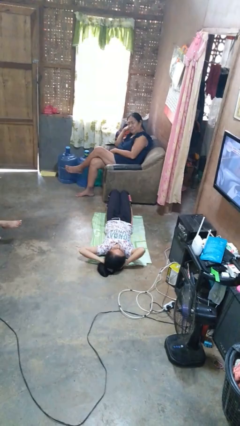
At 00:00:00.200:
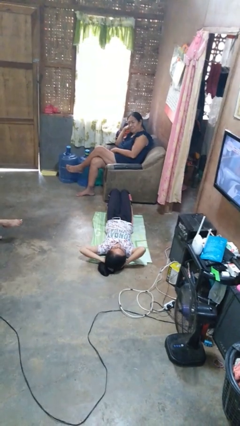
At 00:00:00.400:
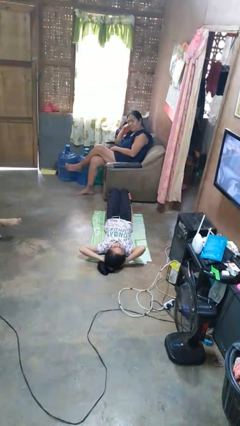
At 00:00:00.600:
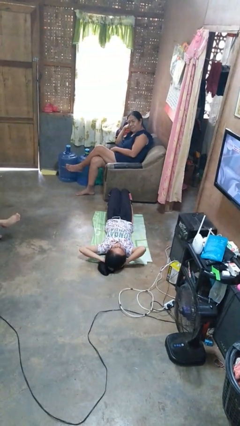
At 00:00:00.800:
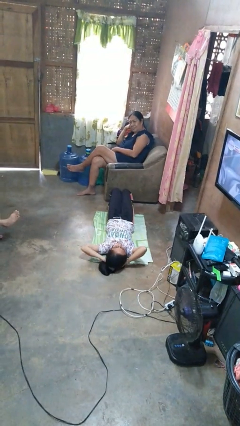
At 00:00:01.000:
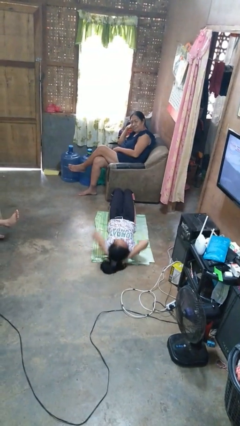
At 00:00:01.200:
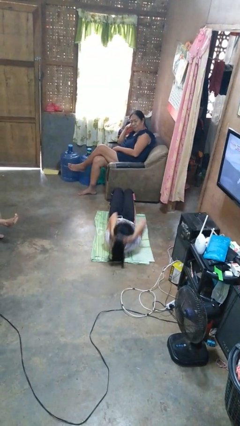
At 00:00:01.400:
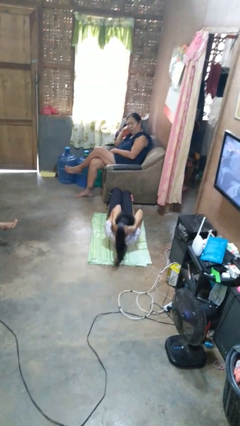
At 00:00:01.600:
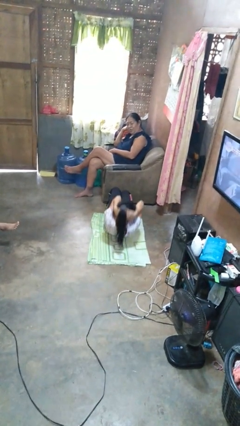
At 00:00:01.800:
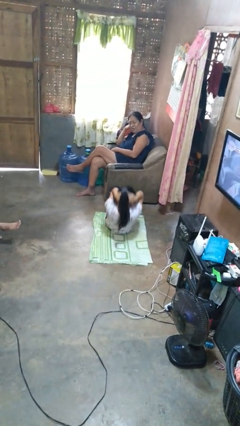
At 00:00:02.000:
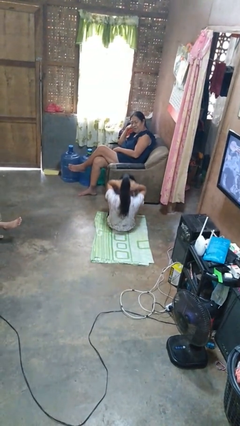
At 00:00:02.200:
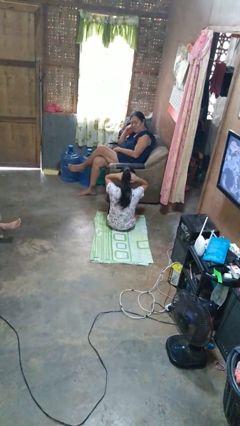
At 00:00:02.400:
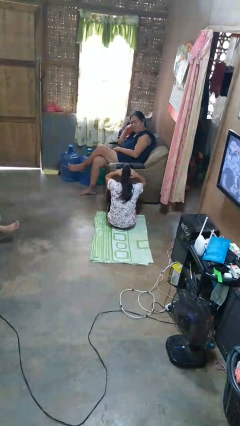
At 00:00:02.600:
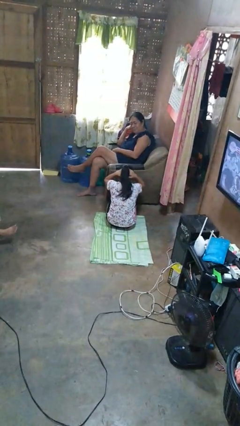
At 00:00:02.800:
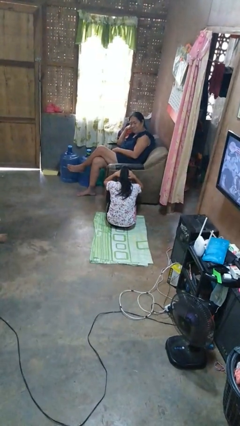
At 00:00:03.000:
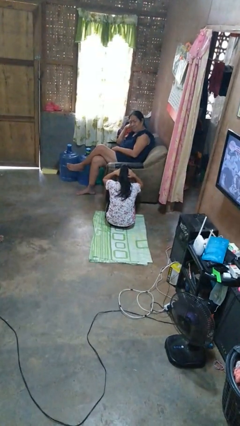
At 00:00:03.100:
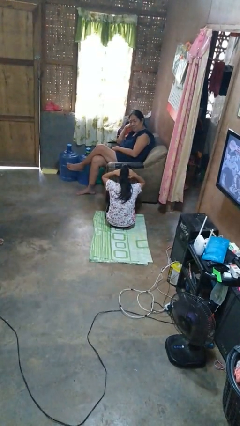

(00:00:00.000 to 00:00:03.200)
person exercises with situp

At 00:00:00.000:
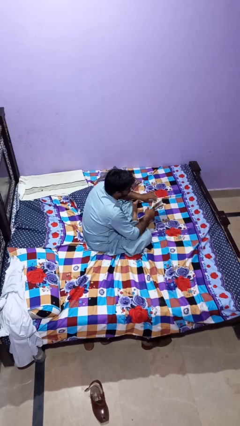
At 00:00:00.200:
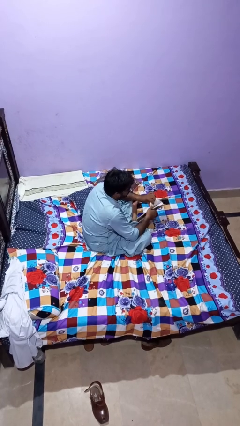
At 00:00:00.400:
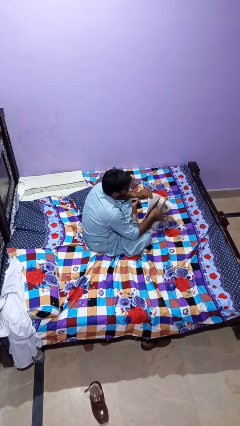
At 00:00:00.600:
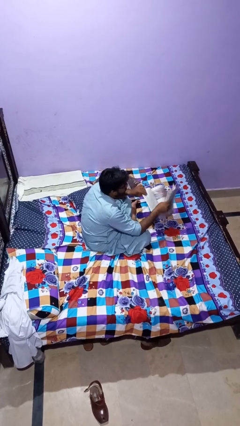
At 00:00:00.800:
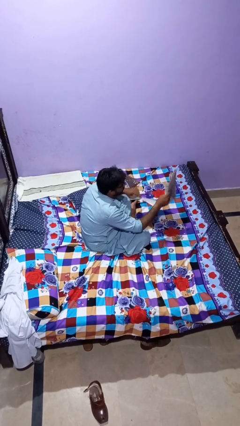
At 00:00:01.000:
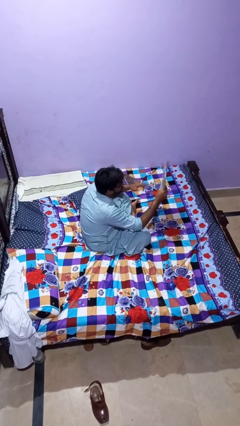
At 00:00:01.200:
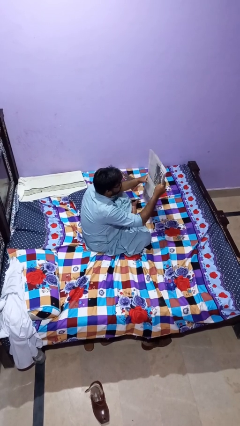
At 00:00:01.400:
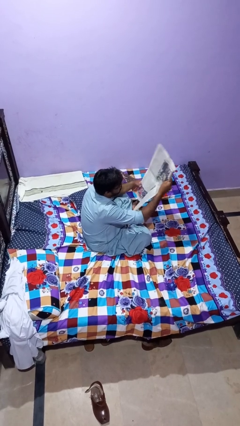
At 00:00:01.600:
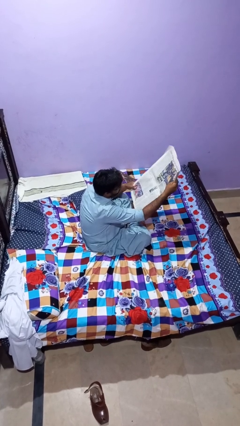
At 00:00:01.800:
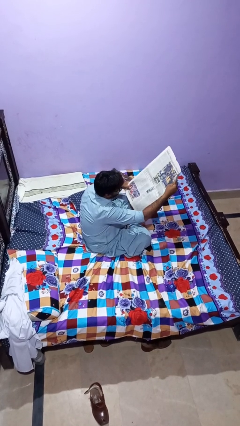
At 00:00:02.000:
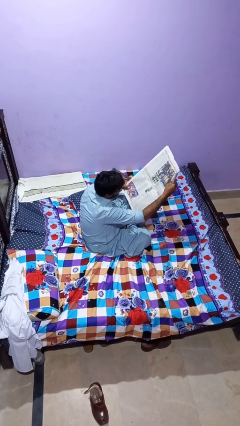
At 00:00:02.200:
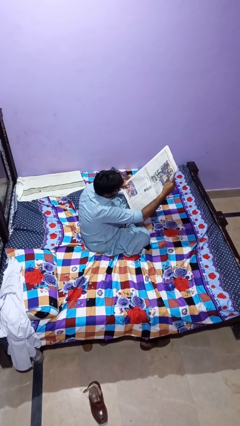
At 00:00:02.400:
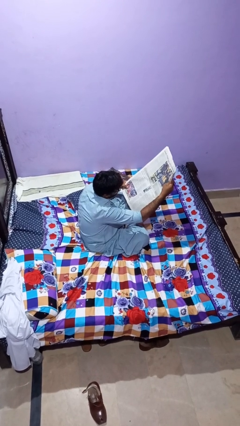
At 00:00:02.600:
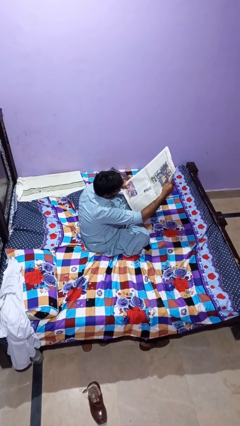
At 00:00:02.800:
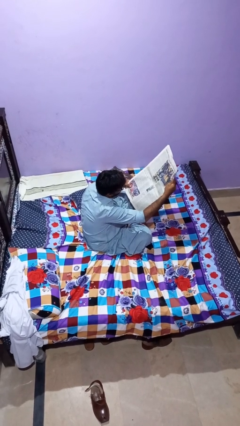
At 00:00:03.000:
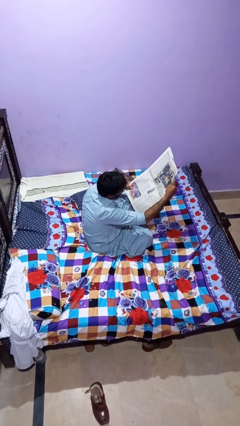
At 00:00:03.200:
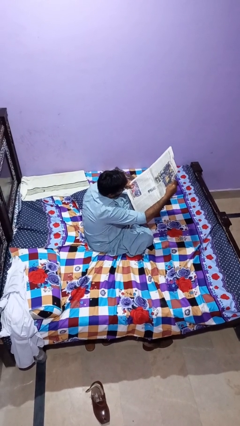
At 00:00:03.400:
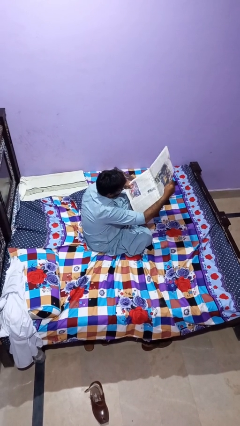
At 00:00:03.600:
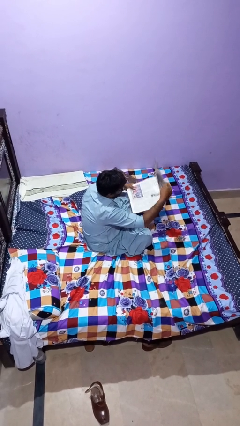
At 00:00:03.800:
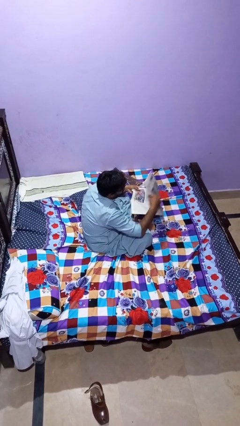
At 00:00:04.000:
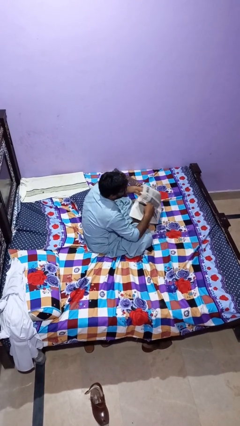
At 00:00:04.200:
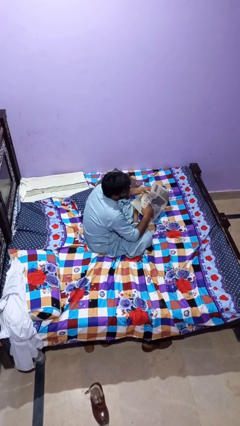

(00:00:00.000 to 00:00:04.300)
person reads newspaper

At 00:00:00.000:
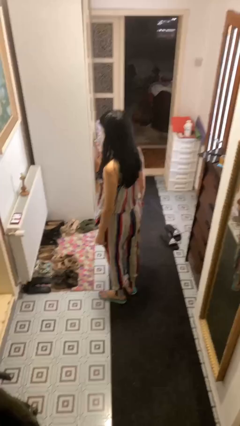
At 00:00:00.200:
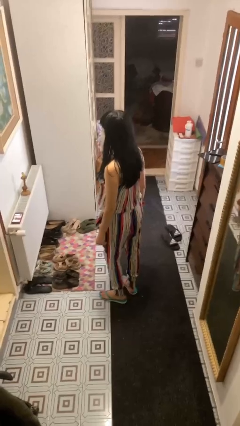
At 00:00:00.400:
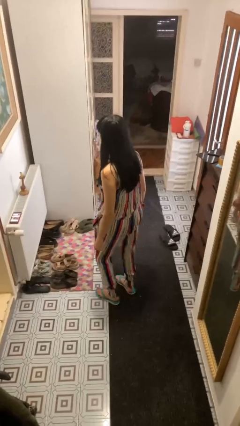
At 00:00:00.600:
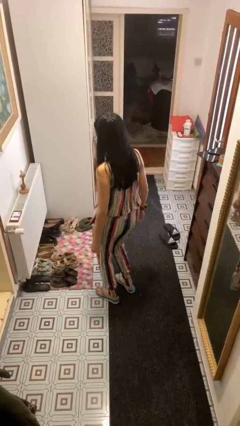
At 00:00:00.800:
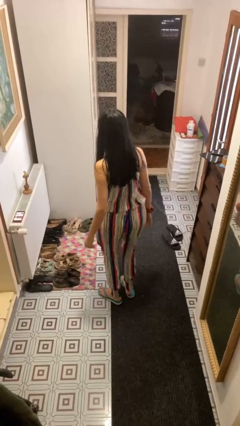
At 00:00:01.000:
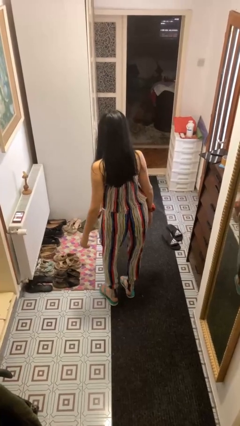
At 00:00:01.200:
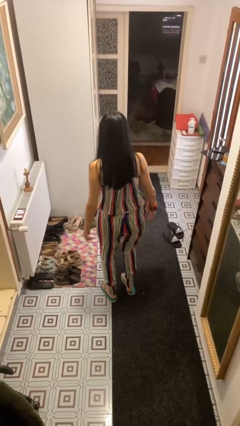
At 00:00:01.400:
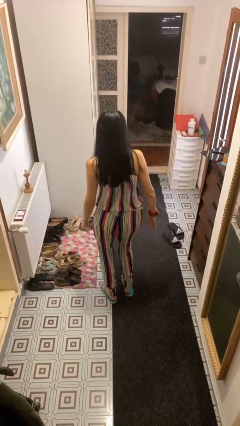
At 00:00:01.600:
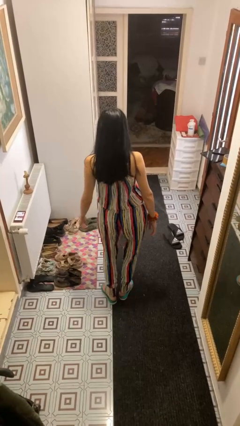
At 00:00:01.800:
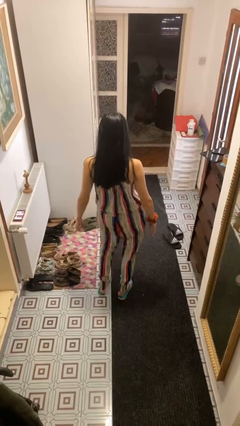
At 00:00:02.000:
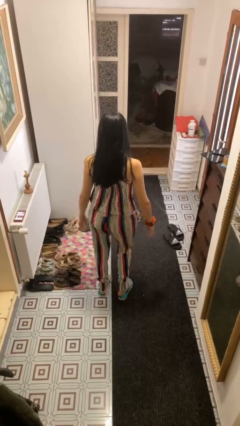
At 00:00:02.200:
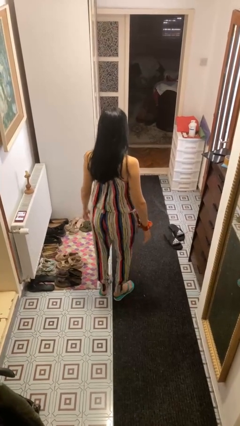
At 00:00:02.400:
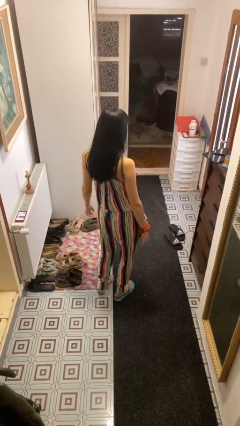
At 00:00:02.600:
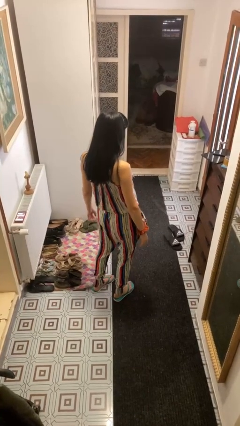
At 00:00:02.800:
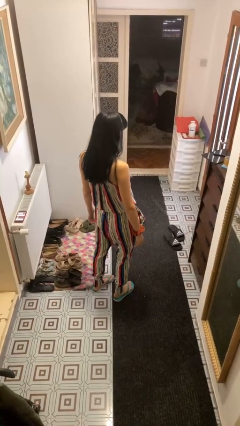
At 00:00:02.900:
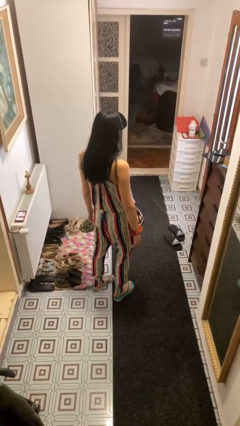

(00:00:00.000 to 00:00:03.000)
person wiggles hips

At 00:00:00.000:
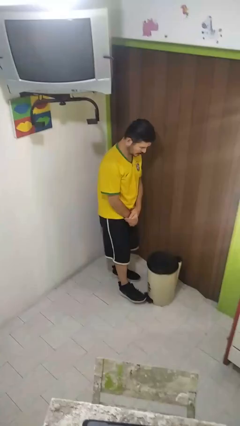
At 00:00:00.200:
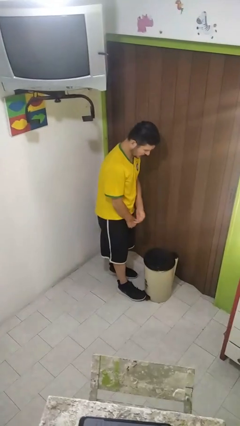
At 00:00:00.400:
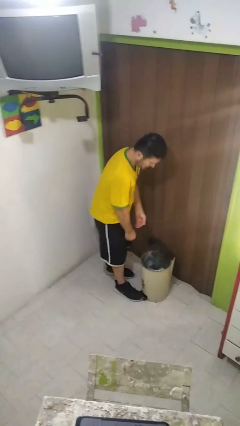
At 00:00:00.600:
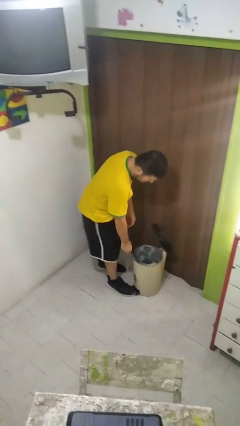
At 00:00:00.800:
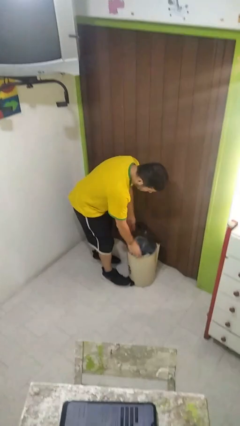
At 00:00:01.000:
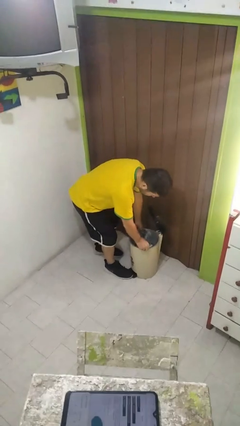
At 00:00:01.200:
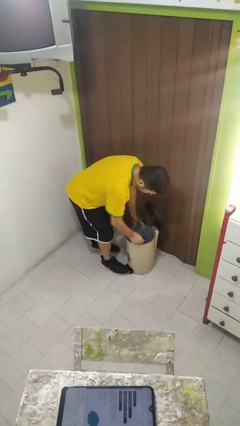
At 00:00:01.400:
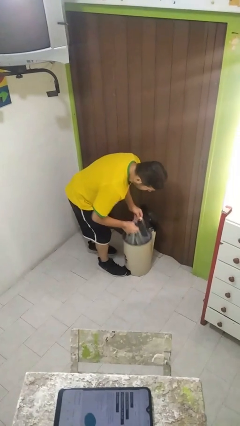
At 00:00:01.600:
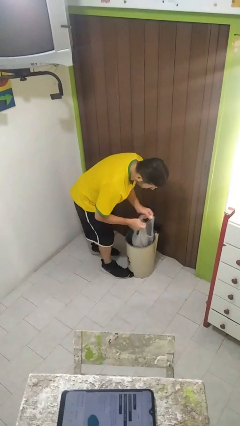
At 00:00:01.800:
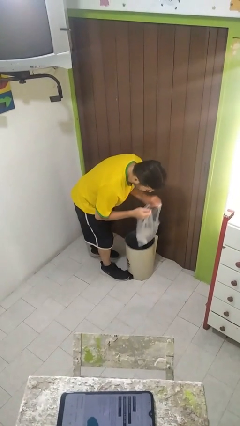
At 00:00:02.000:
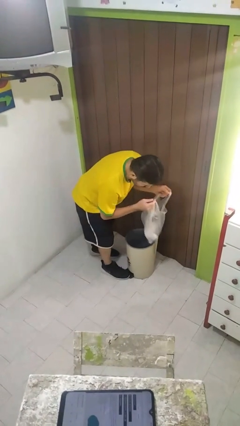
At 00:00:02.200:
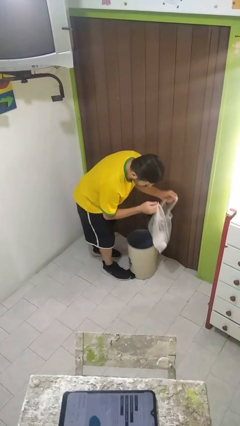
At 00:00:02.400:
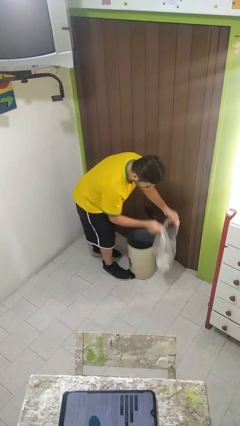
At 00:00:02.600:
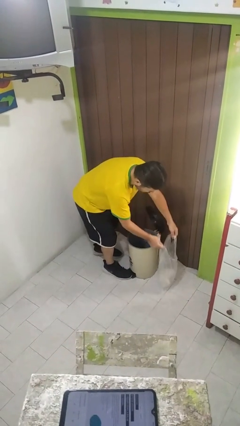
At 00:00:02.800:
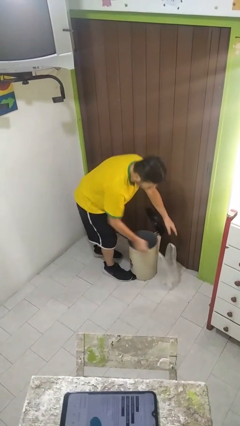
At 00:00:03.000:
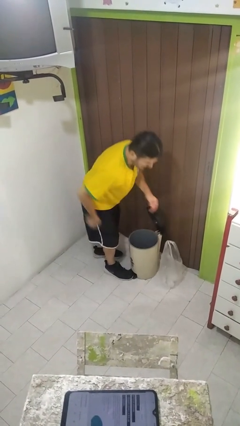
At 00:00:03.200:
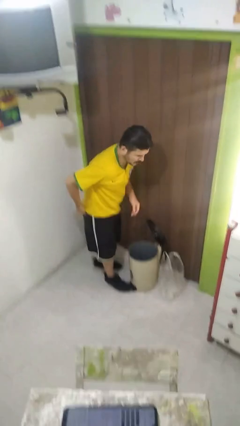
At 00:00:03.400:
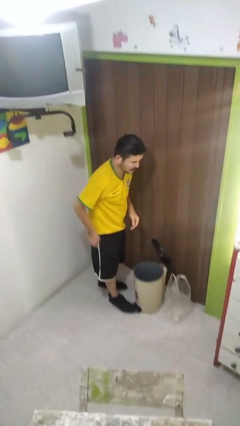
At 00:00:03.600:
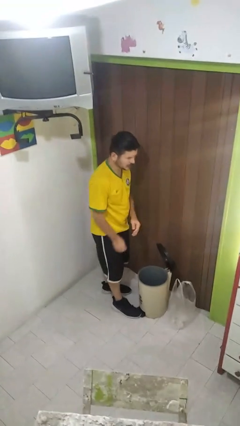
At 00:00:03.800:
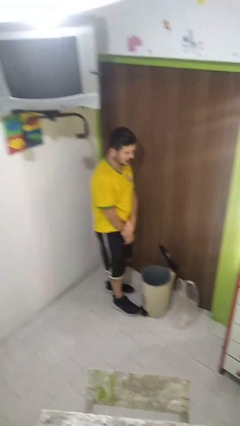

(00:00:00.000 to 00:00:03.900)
person removes trashbag from trashcan

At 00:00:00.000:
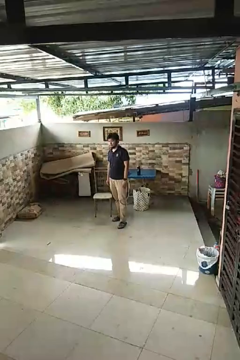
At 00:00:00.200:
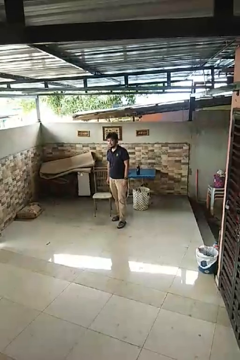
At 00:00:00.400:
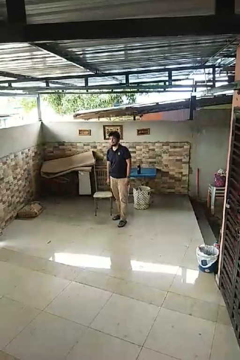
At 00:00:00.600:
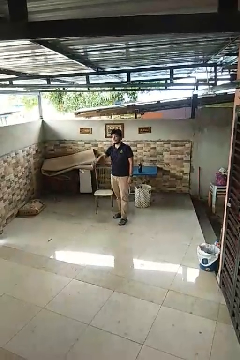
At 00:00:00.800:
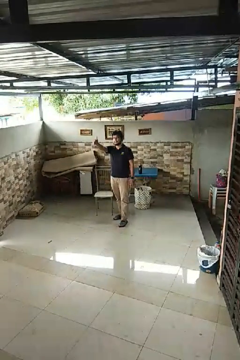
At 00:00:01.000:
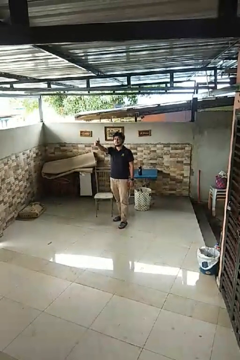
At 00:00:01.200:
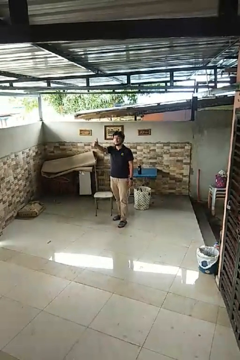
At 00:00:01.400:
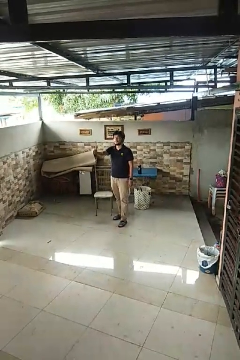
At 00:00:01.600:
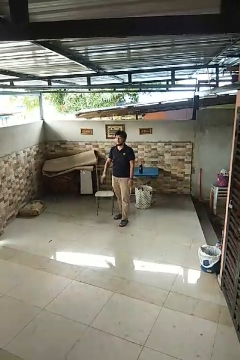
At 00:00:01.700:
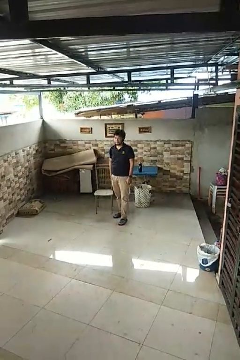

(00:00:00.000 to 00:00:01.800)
person gestures thumbs up

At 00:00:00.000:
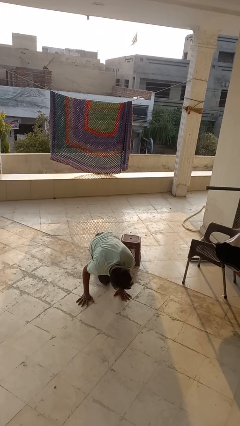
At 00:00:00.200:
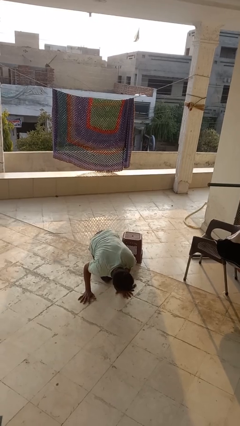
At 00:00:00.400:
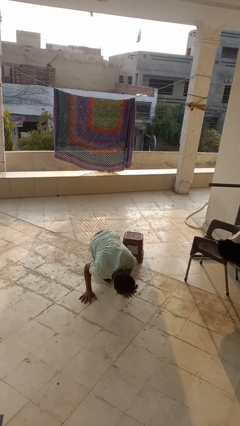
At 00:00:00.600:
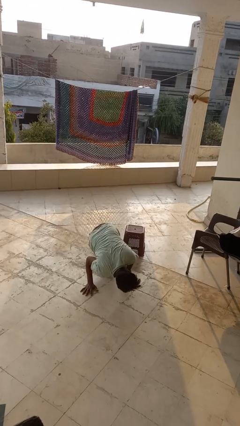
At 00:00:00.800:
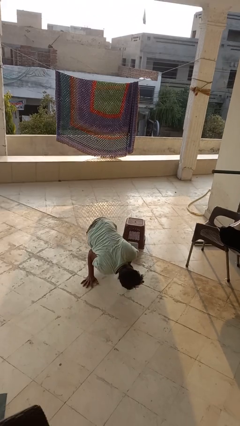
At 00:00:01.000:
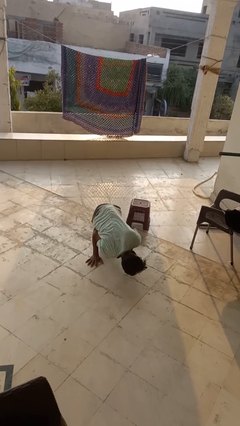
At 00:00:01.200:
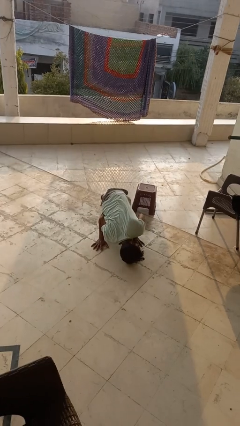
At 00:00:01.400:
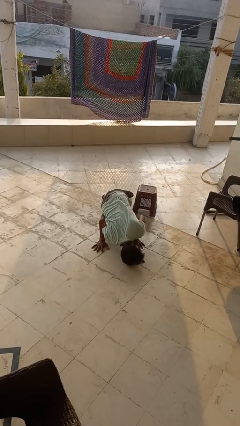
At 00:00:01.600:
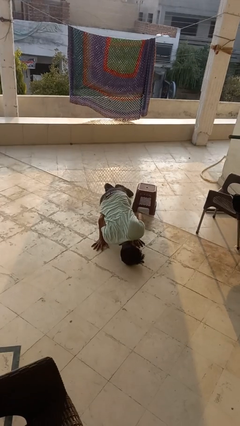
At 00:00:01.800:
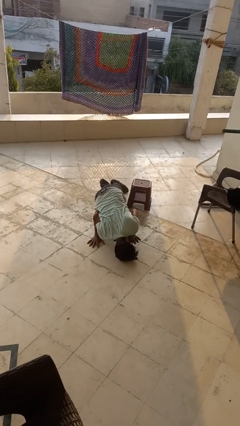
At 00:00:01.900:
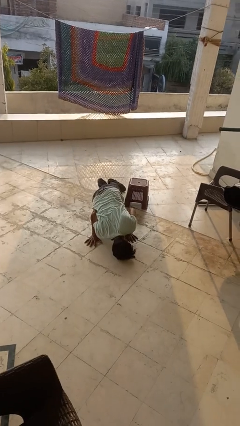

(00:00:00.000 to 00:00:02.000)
person lies down on floor
